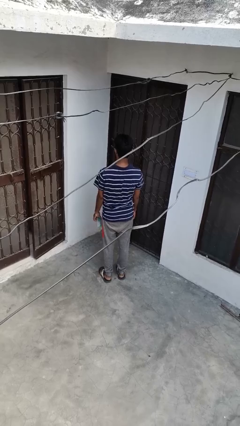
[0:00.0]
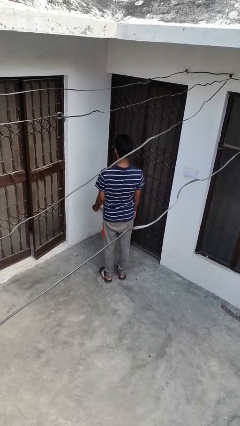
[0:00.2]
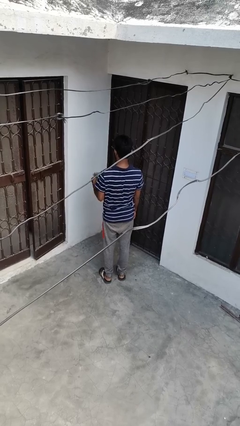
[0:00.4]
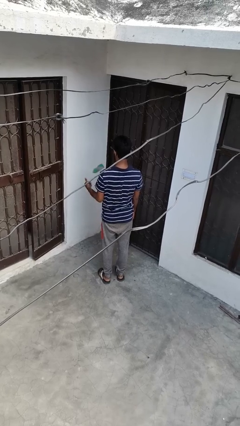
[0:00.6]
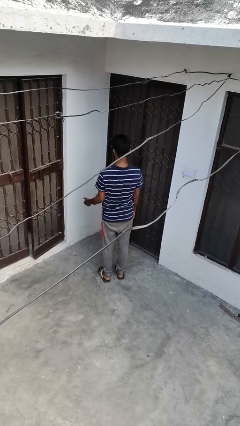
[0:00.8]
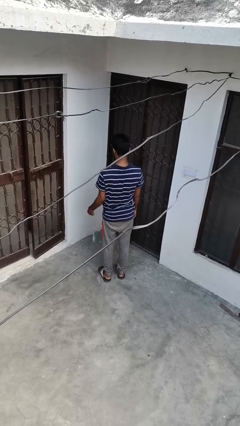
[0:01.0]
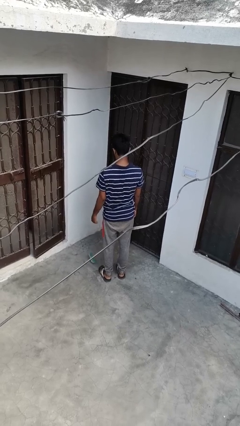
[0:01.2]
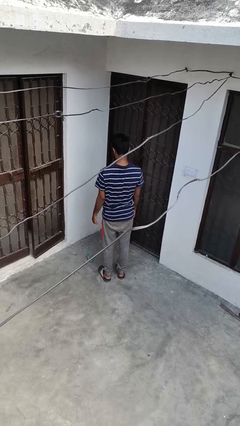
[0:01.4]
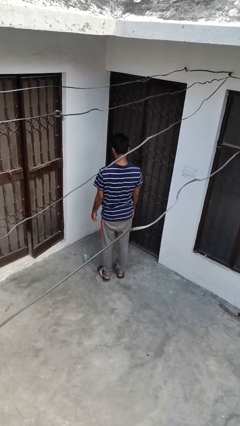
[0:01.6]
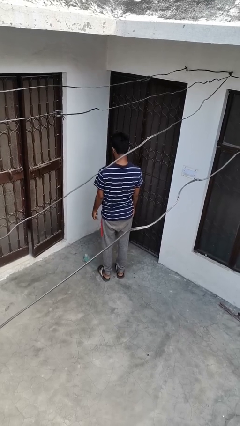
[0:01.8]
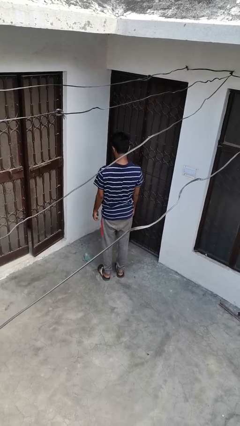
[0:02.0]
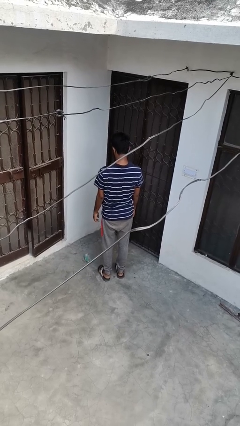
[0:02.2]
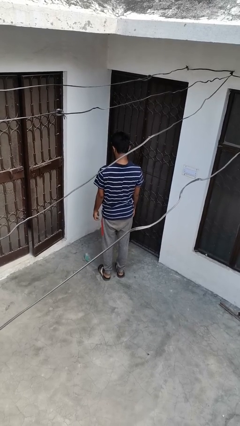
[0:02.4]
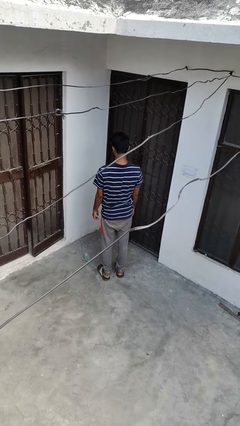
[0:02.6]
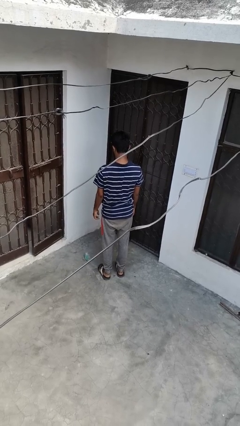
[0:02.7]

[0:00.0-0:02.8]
person throws object into air

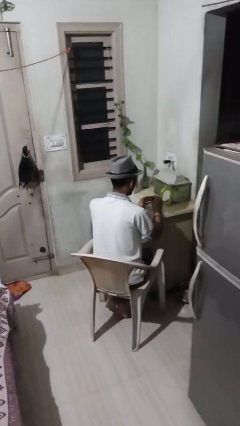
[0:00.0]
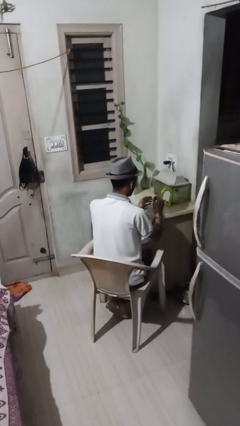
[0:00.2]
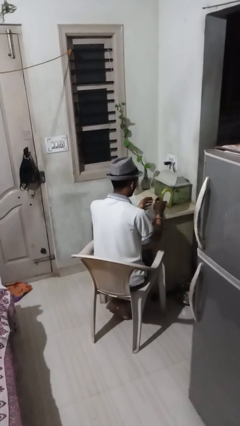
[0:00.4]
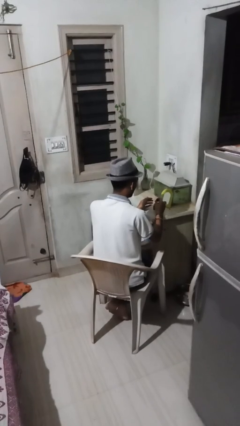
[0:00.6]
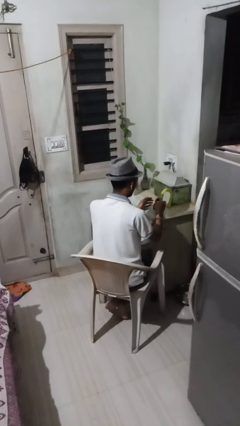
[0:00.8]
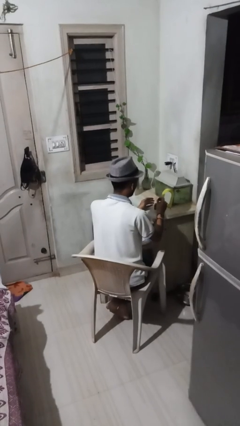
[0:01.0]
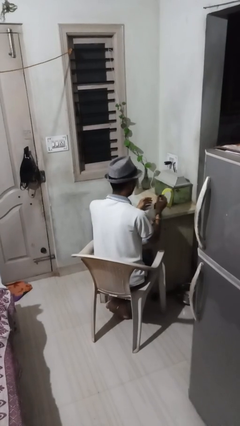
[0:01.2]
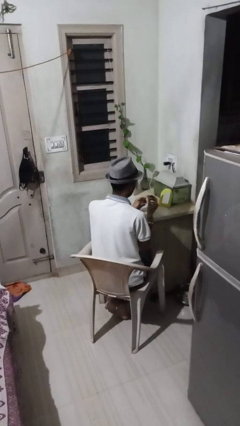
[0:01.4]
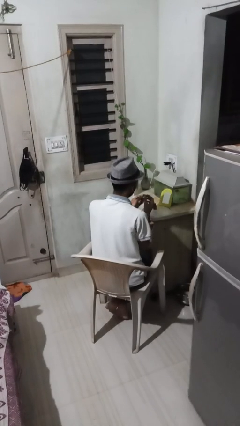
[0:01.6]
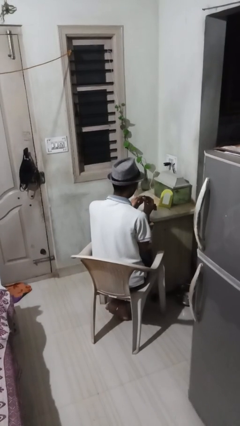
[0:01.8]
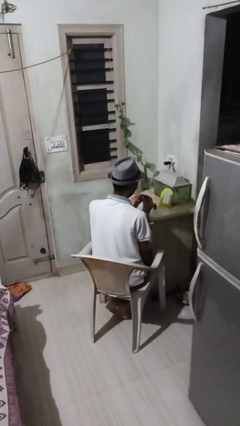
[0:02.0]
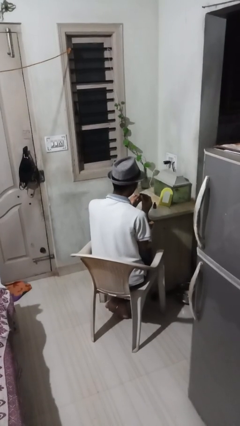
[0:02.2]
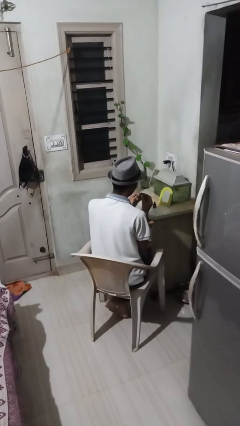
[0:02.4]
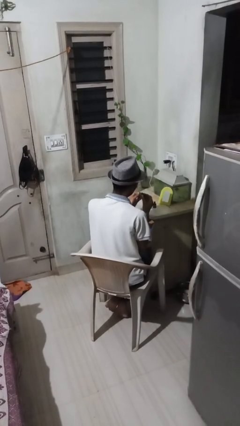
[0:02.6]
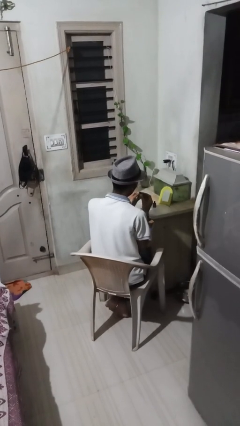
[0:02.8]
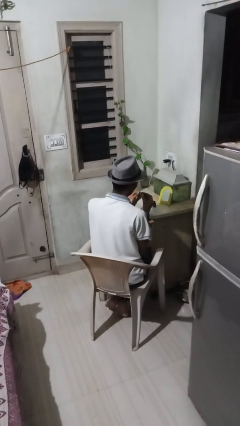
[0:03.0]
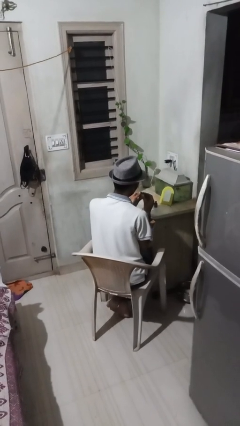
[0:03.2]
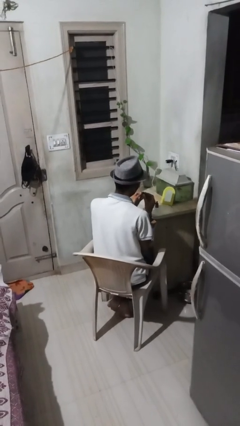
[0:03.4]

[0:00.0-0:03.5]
person paints fingernails

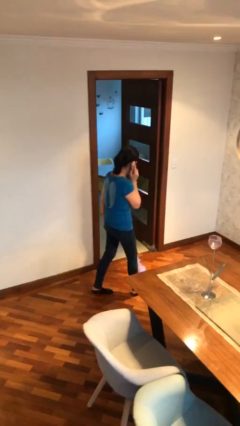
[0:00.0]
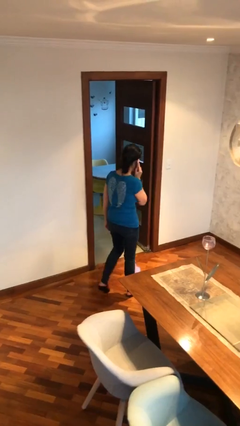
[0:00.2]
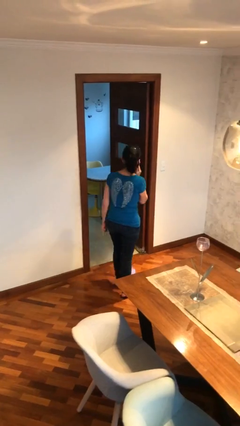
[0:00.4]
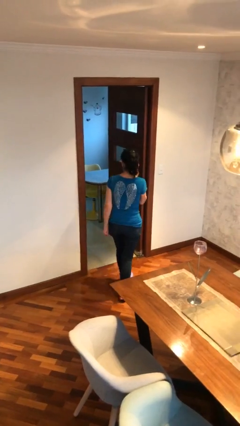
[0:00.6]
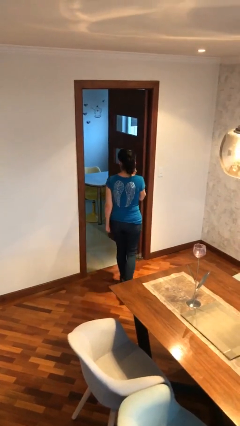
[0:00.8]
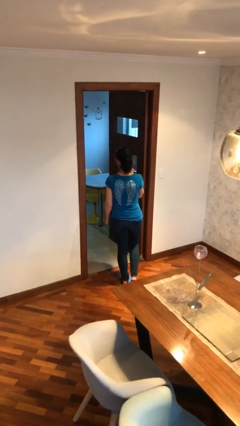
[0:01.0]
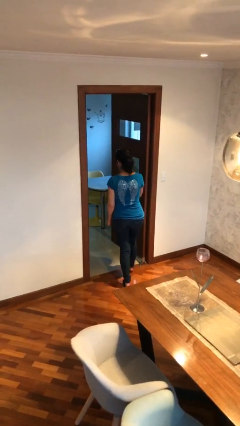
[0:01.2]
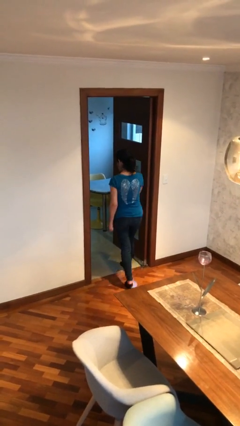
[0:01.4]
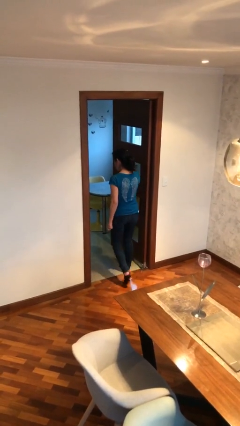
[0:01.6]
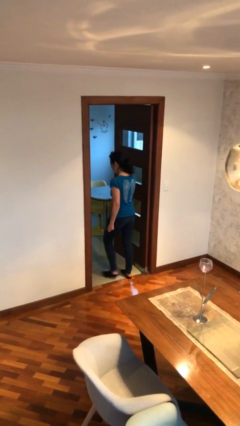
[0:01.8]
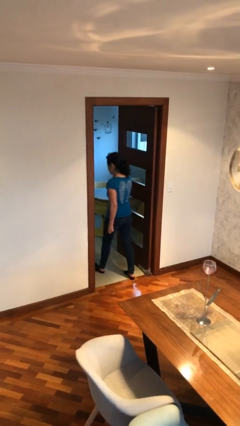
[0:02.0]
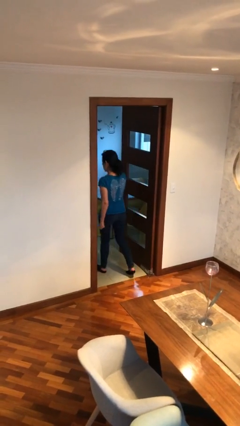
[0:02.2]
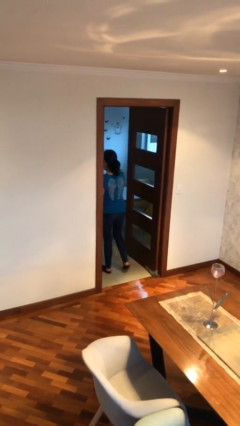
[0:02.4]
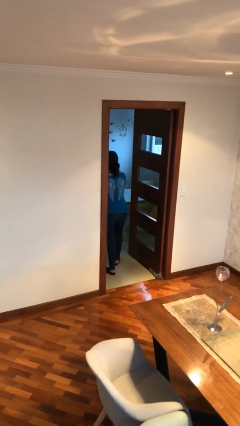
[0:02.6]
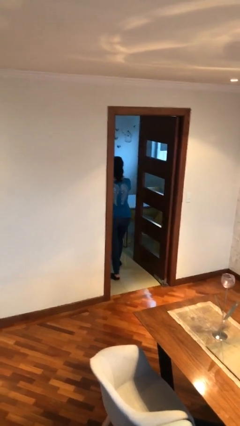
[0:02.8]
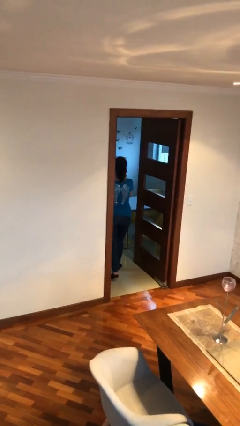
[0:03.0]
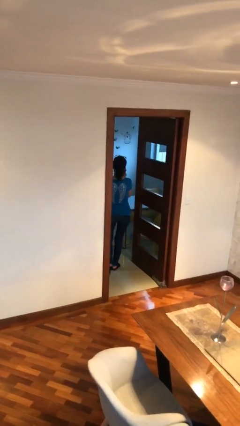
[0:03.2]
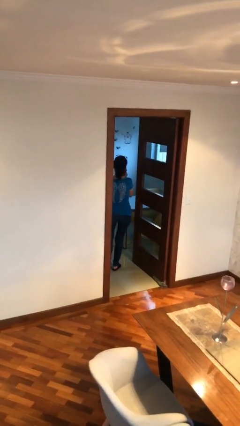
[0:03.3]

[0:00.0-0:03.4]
person exits scene through structure

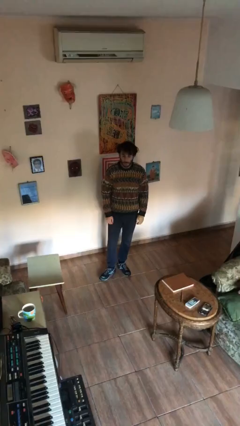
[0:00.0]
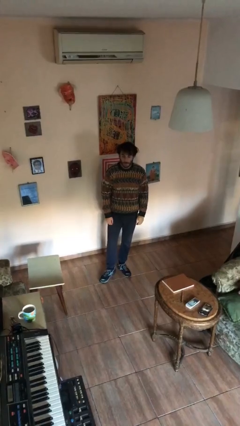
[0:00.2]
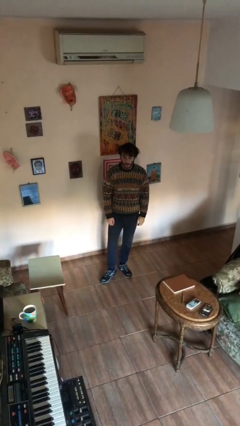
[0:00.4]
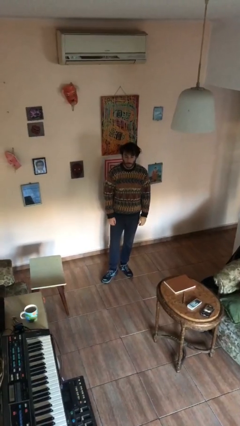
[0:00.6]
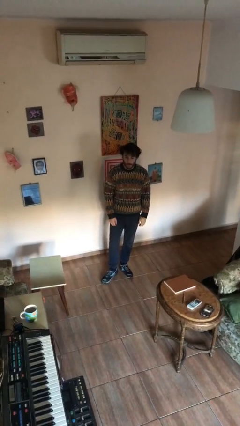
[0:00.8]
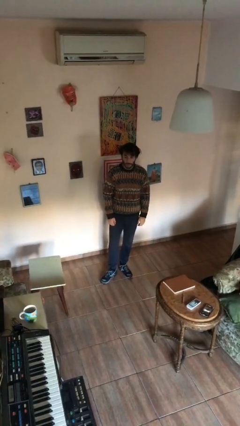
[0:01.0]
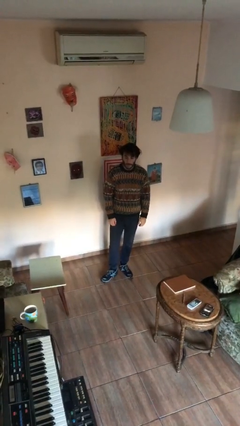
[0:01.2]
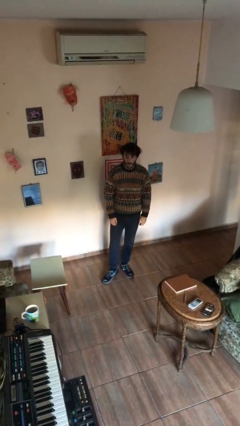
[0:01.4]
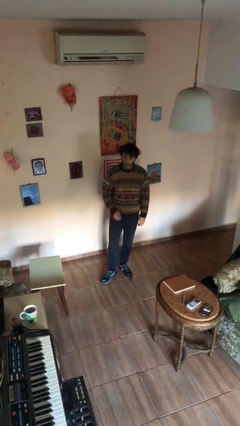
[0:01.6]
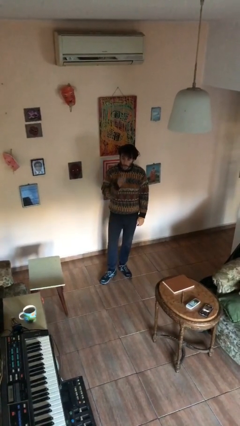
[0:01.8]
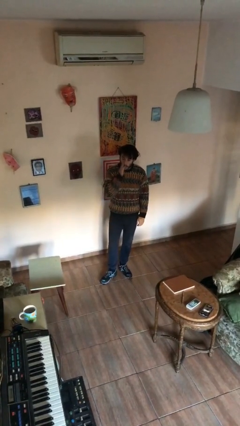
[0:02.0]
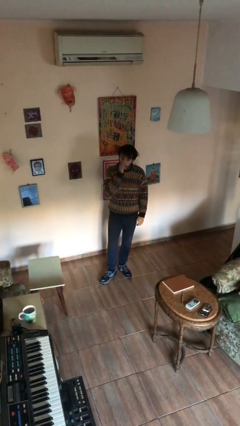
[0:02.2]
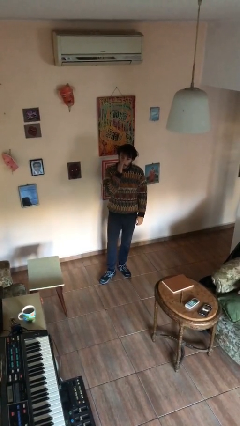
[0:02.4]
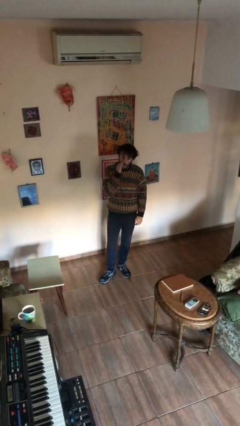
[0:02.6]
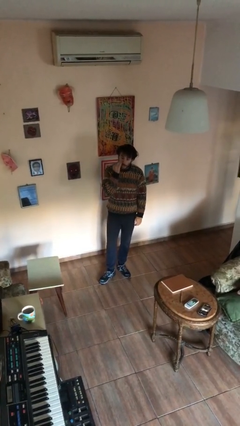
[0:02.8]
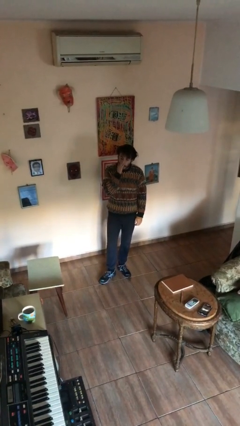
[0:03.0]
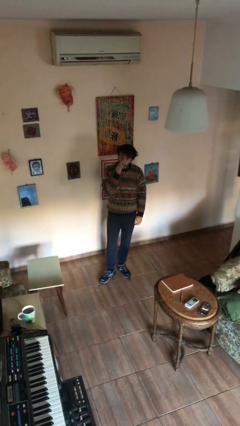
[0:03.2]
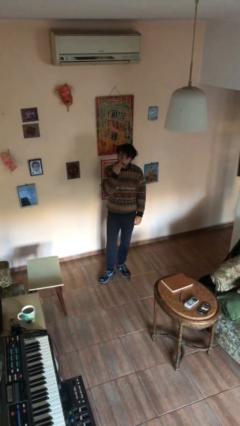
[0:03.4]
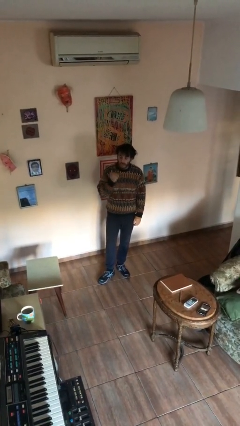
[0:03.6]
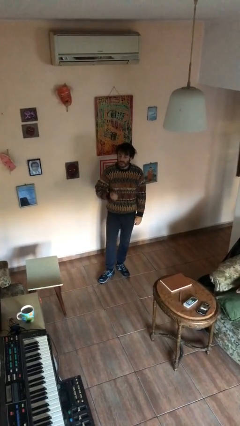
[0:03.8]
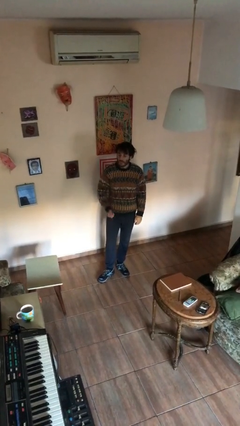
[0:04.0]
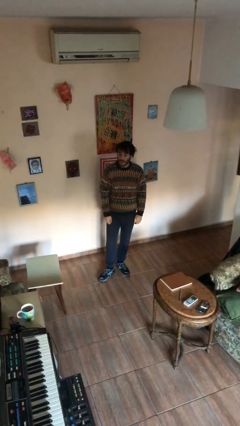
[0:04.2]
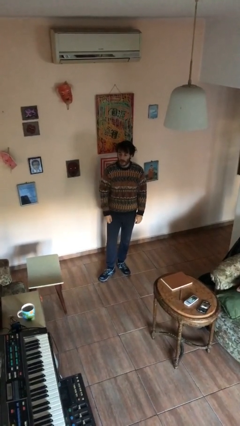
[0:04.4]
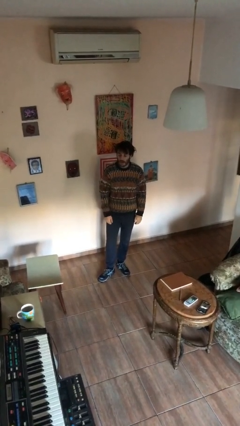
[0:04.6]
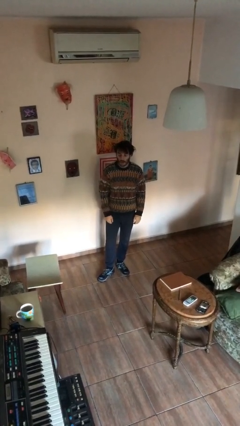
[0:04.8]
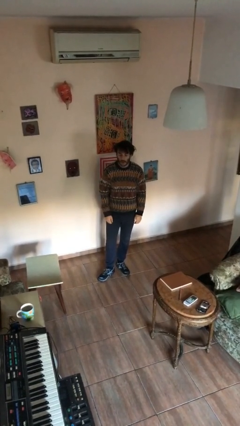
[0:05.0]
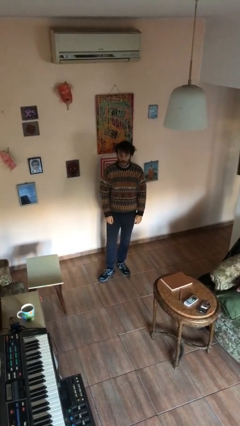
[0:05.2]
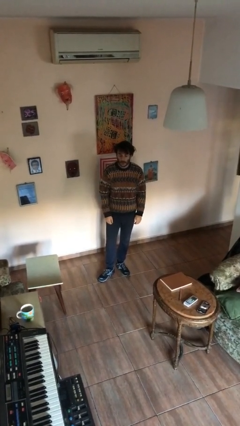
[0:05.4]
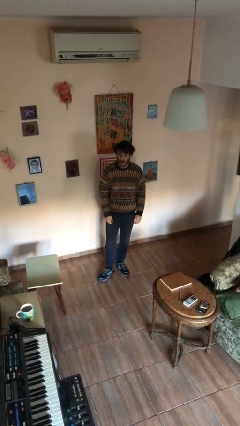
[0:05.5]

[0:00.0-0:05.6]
person scratches face

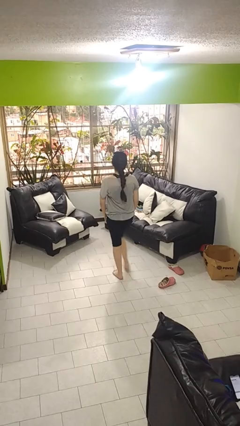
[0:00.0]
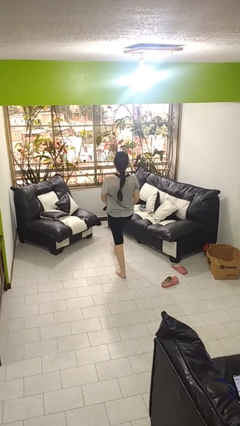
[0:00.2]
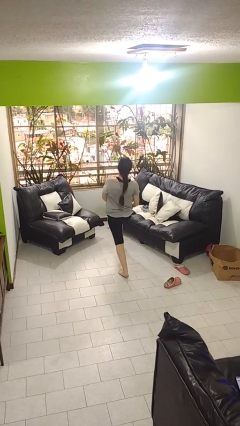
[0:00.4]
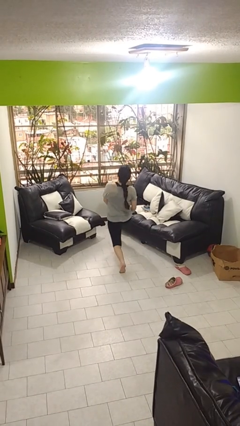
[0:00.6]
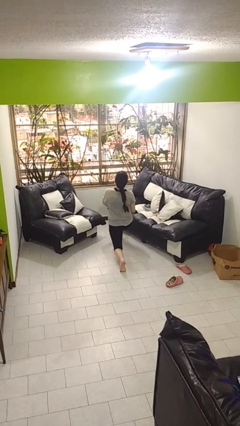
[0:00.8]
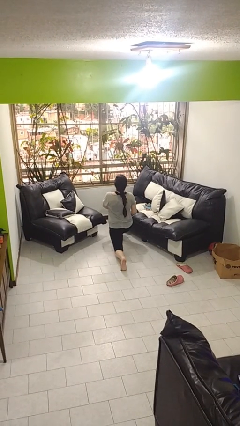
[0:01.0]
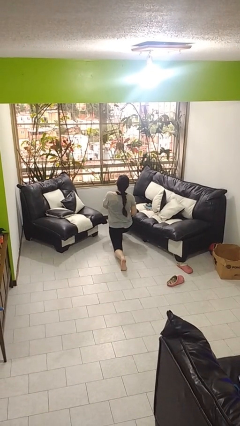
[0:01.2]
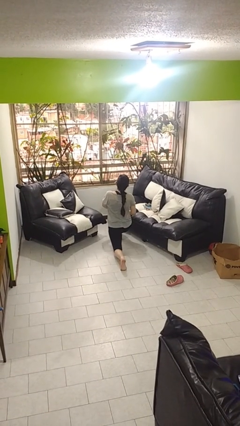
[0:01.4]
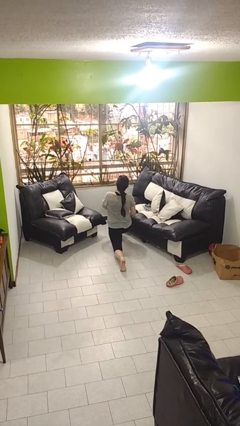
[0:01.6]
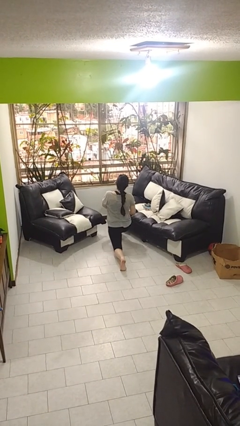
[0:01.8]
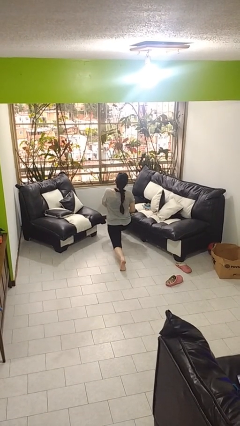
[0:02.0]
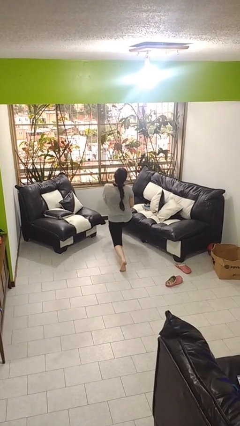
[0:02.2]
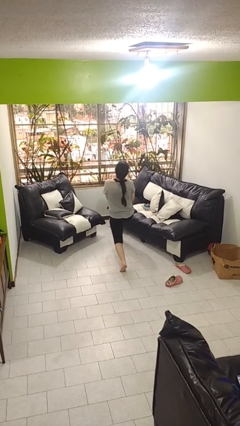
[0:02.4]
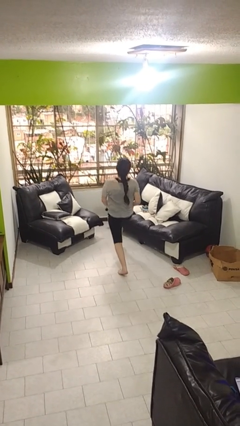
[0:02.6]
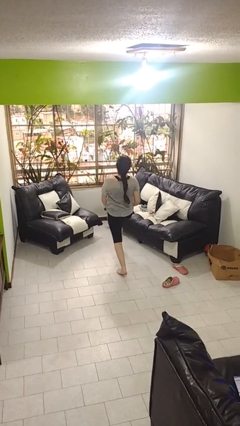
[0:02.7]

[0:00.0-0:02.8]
person exercises with lunges
